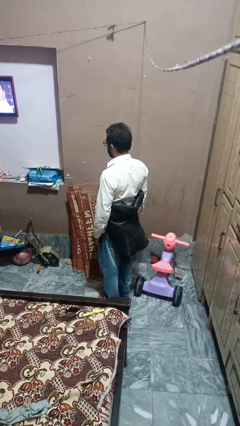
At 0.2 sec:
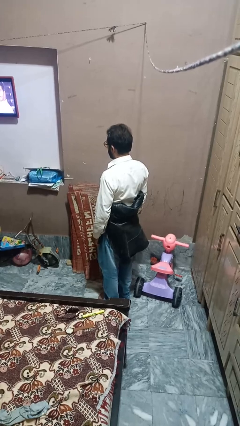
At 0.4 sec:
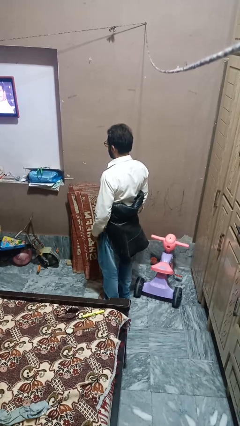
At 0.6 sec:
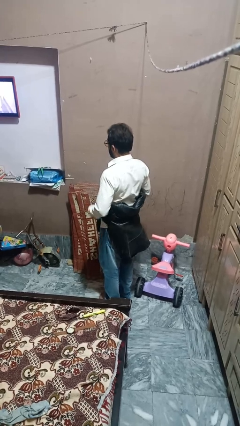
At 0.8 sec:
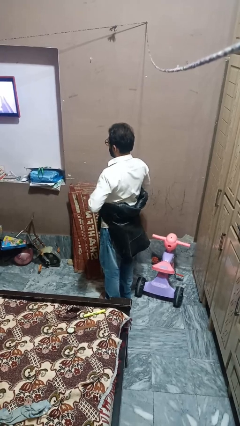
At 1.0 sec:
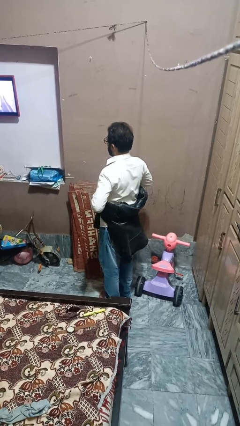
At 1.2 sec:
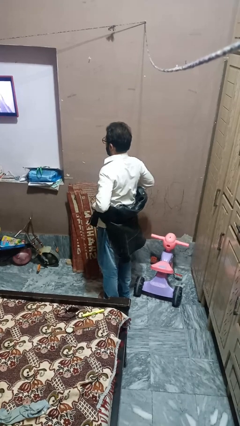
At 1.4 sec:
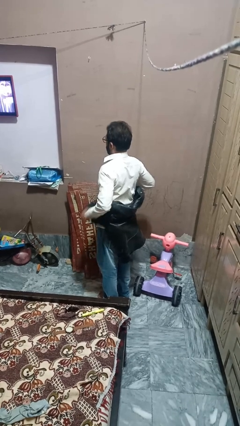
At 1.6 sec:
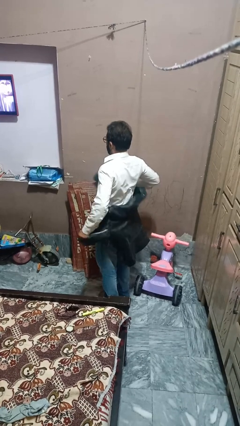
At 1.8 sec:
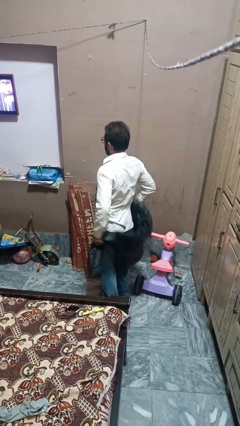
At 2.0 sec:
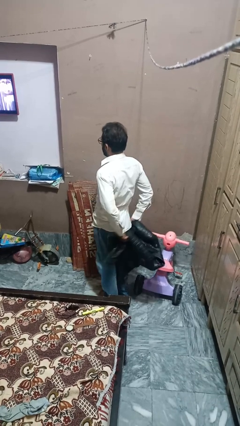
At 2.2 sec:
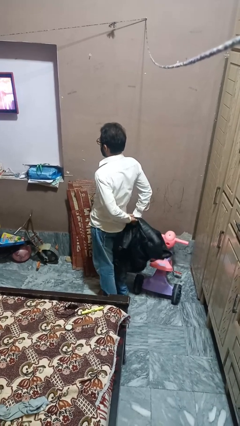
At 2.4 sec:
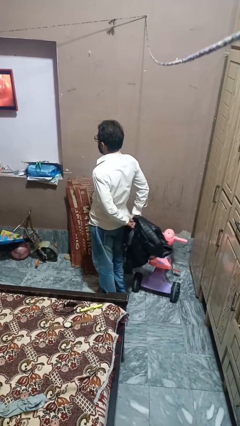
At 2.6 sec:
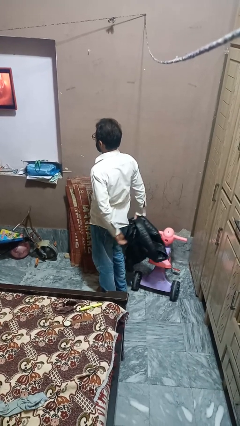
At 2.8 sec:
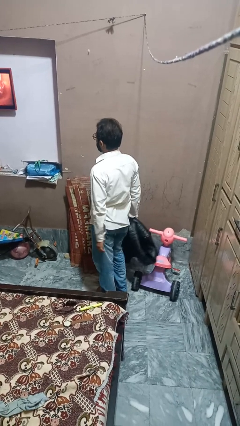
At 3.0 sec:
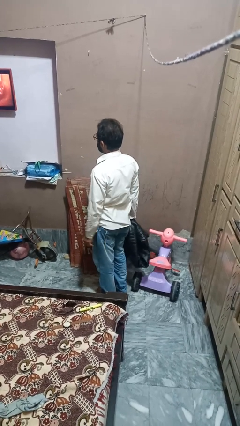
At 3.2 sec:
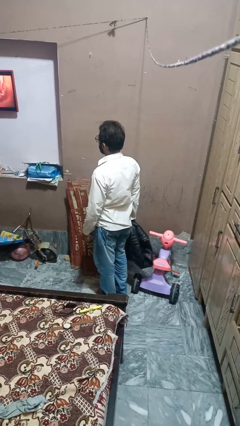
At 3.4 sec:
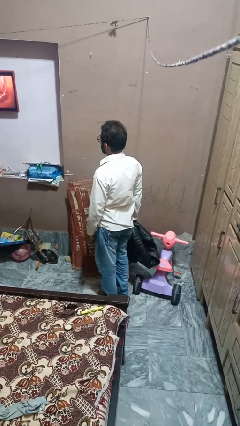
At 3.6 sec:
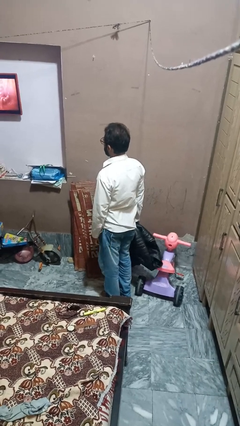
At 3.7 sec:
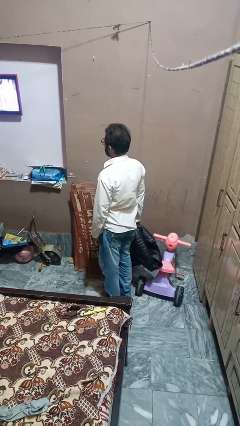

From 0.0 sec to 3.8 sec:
person unties jacket around waist

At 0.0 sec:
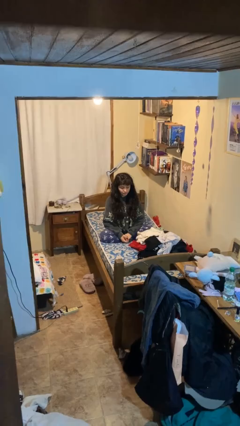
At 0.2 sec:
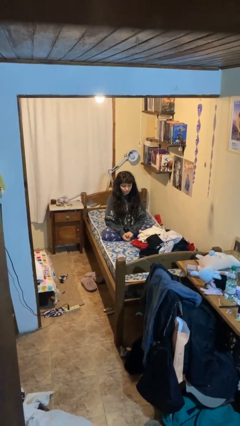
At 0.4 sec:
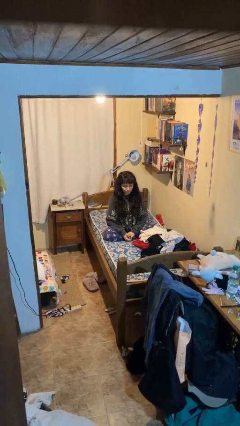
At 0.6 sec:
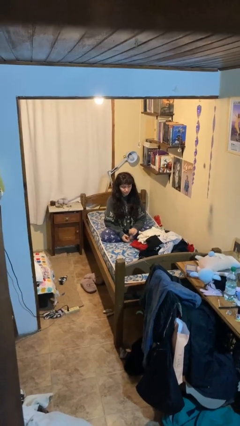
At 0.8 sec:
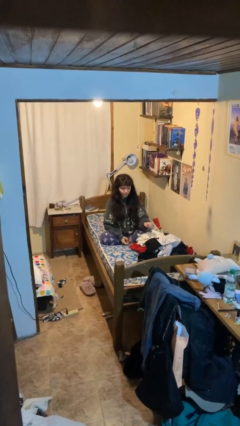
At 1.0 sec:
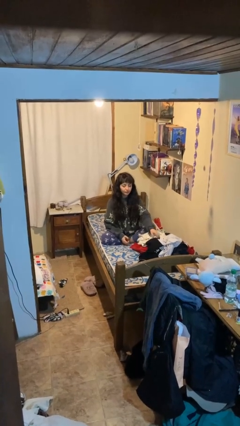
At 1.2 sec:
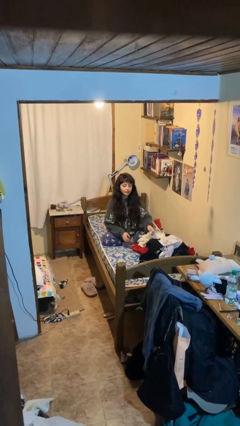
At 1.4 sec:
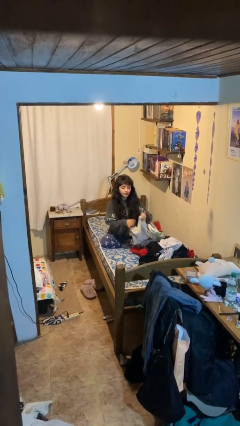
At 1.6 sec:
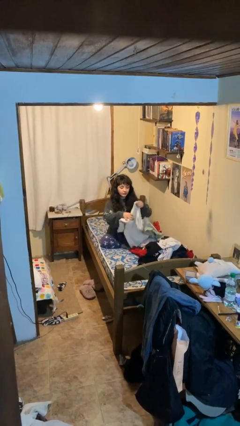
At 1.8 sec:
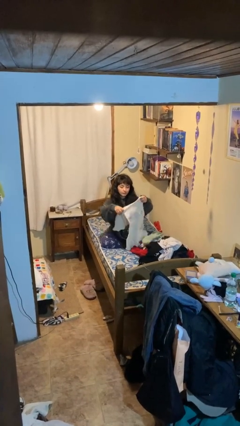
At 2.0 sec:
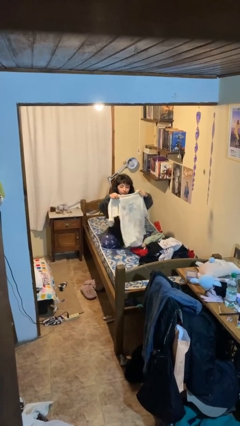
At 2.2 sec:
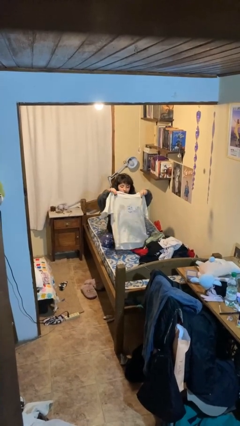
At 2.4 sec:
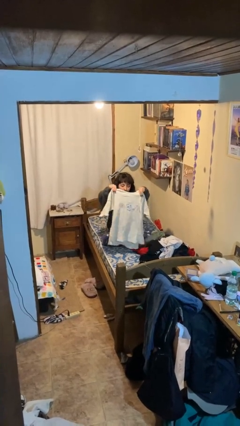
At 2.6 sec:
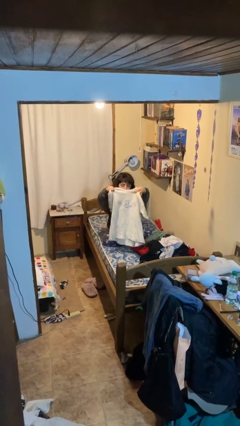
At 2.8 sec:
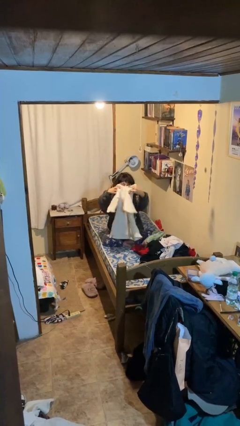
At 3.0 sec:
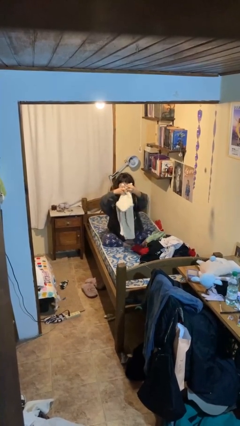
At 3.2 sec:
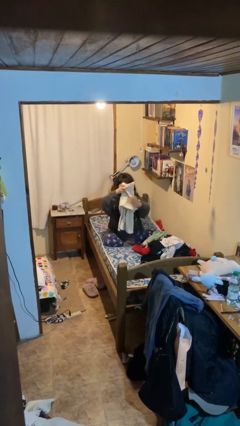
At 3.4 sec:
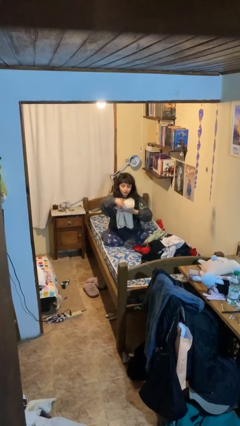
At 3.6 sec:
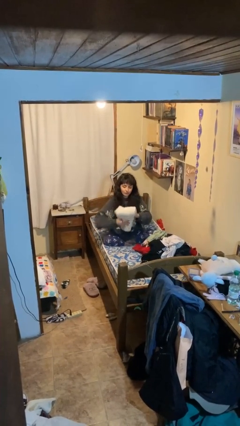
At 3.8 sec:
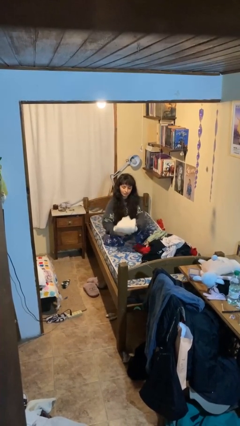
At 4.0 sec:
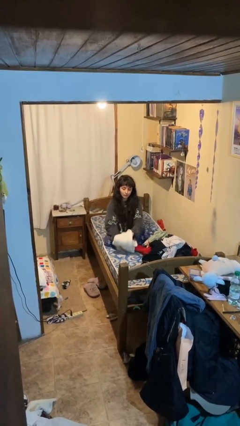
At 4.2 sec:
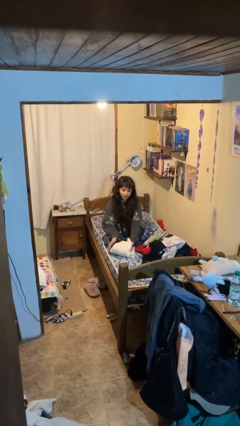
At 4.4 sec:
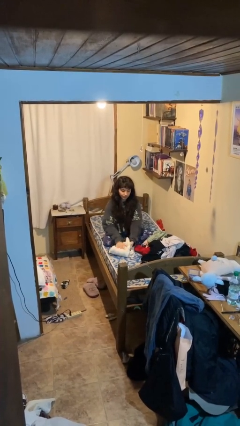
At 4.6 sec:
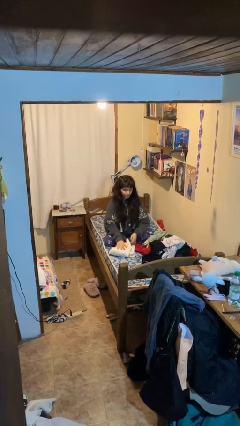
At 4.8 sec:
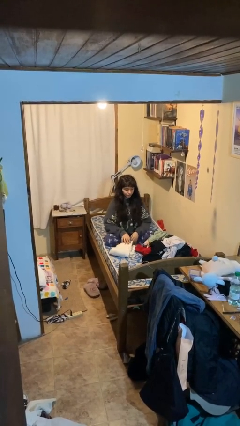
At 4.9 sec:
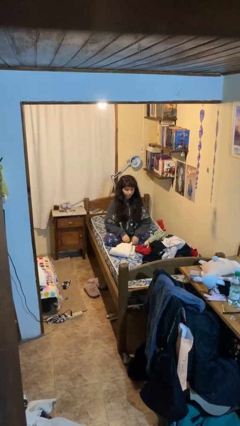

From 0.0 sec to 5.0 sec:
person folds shirt

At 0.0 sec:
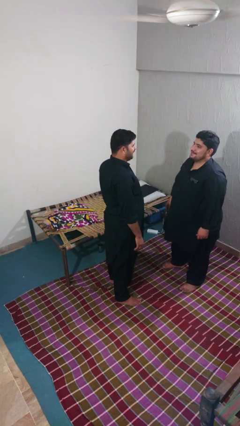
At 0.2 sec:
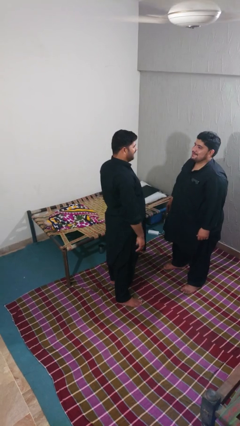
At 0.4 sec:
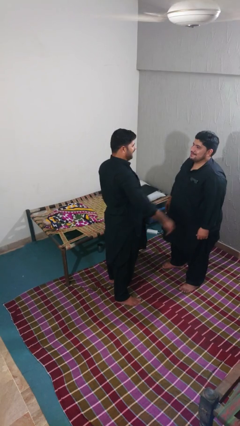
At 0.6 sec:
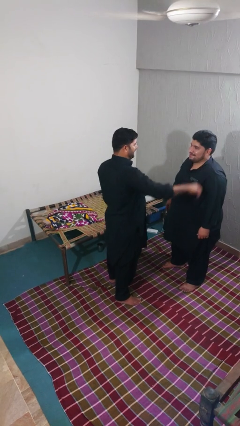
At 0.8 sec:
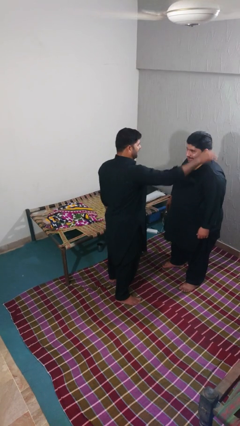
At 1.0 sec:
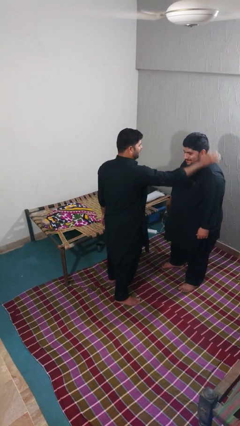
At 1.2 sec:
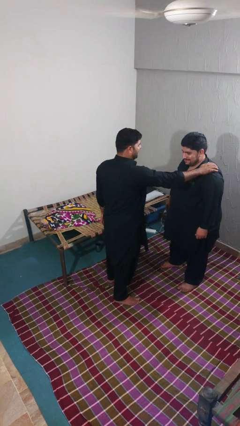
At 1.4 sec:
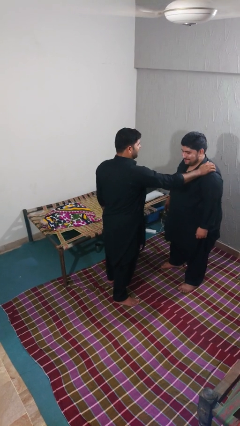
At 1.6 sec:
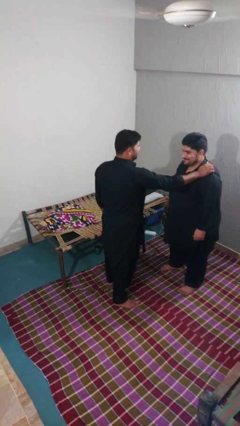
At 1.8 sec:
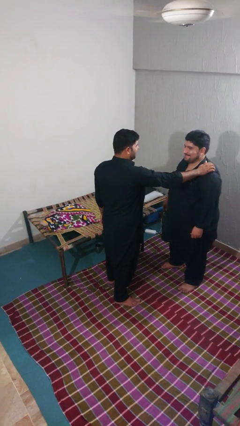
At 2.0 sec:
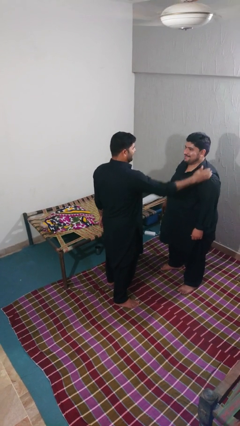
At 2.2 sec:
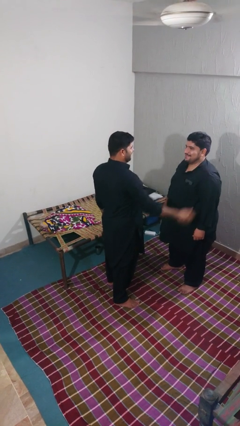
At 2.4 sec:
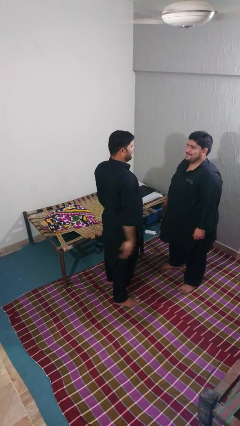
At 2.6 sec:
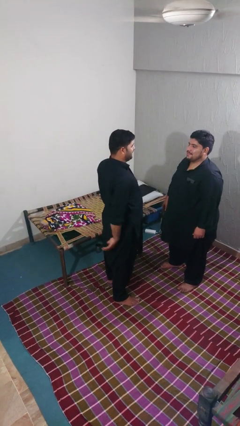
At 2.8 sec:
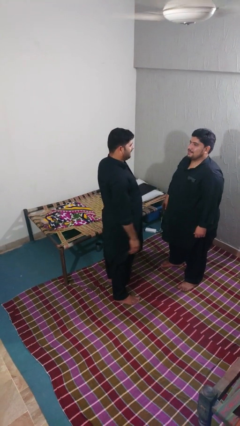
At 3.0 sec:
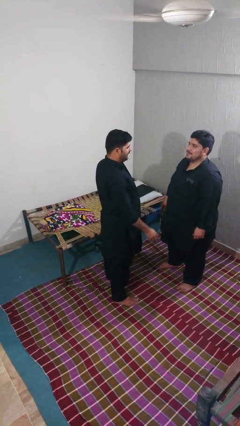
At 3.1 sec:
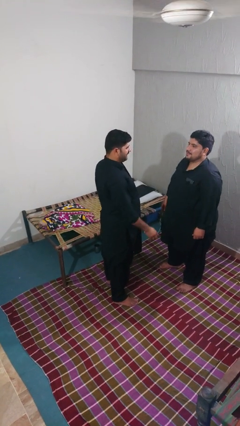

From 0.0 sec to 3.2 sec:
person pounds shoulders of person

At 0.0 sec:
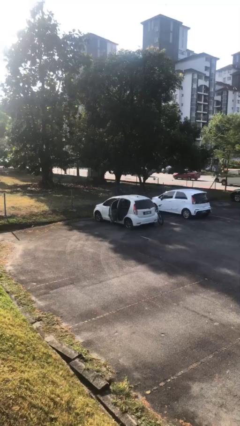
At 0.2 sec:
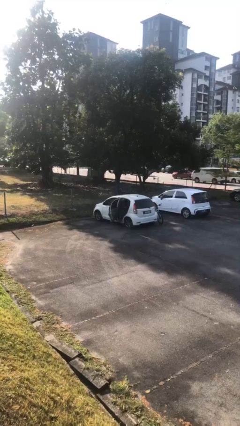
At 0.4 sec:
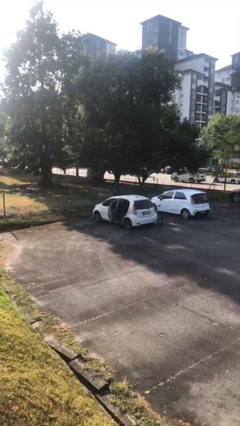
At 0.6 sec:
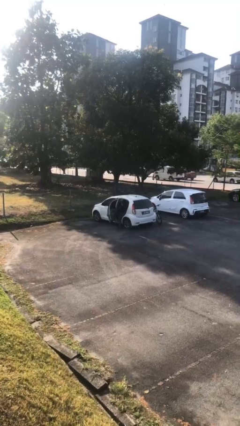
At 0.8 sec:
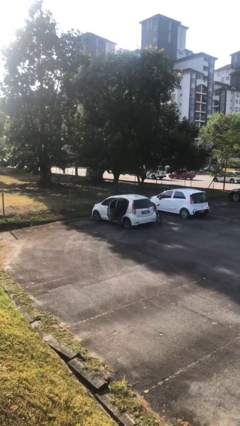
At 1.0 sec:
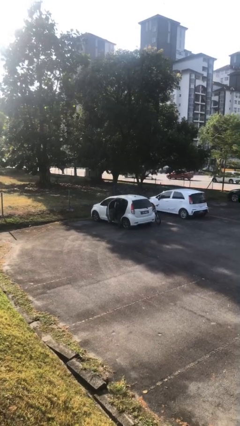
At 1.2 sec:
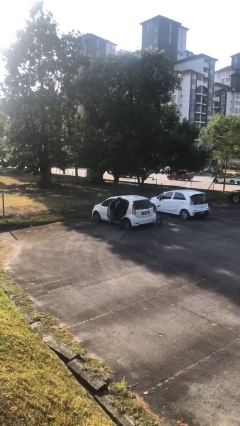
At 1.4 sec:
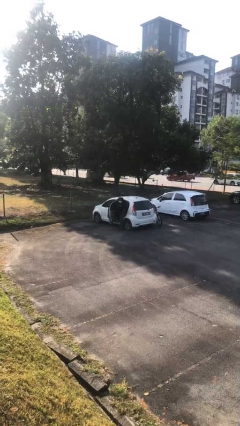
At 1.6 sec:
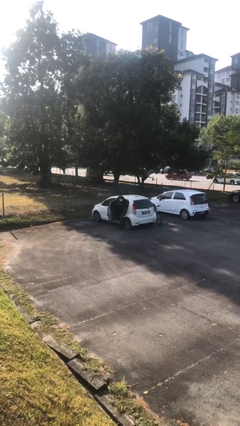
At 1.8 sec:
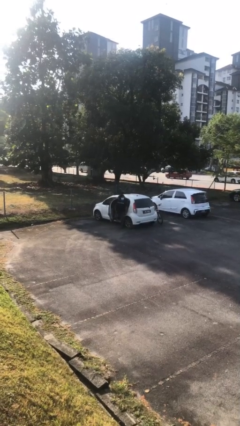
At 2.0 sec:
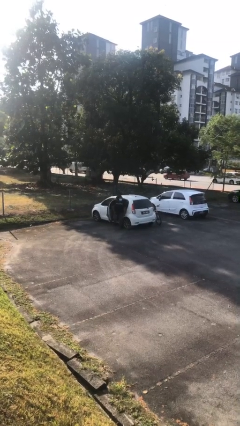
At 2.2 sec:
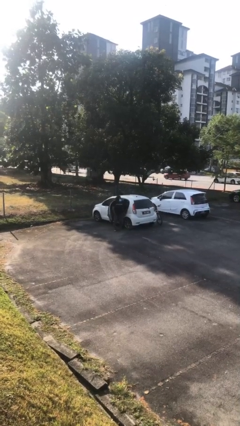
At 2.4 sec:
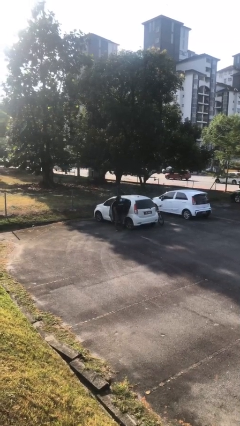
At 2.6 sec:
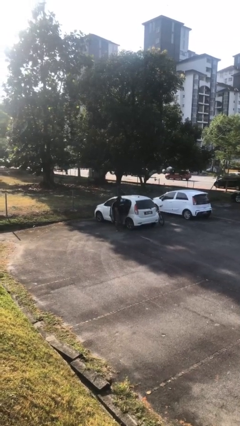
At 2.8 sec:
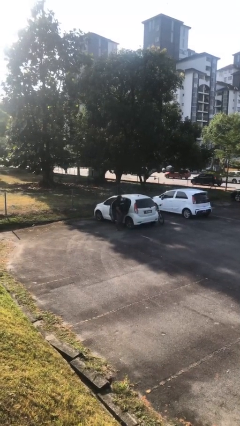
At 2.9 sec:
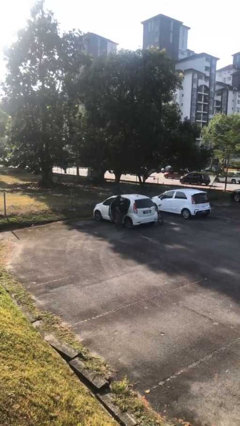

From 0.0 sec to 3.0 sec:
person exits car

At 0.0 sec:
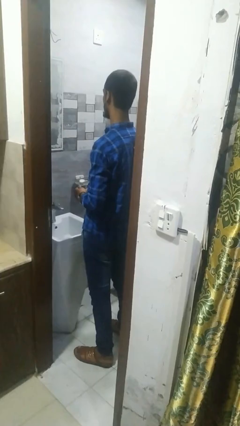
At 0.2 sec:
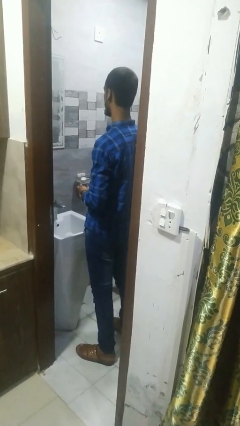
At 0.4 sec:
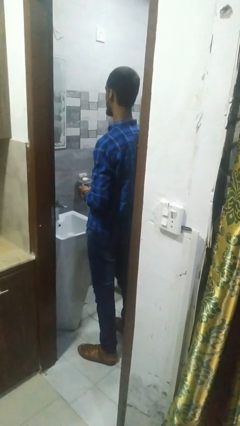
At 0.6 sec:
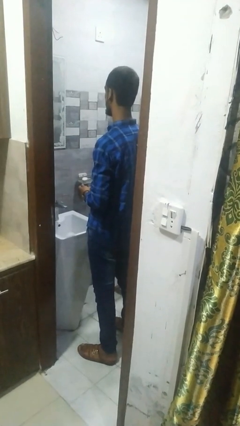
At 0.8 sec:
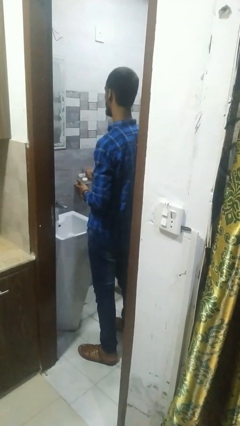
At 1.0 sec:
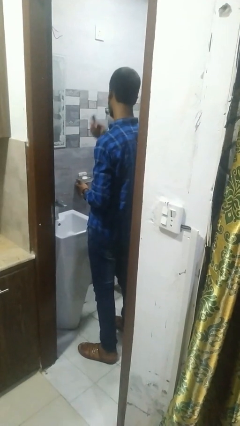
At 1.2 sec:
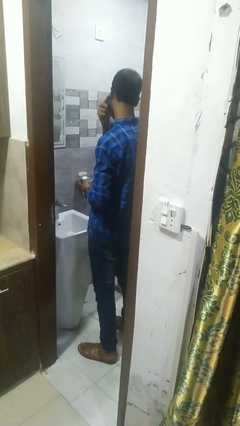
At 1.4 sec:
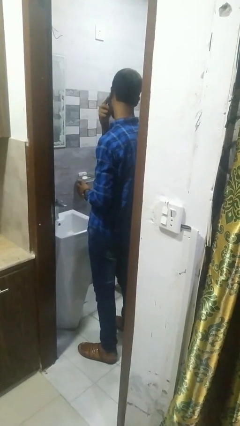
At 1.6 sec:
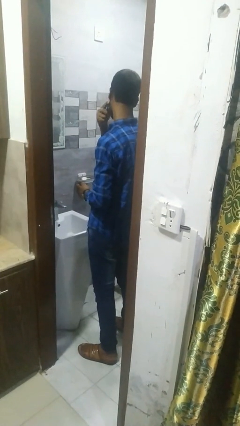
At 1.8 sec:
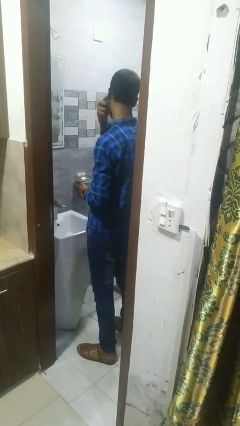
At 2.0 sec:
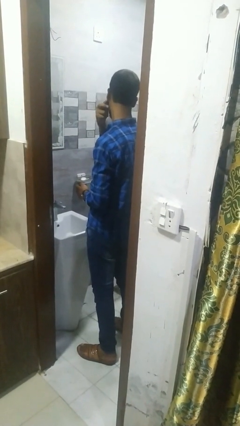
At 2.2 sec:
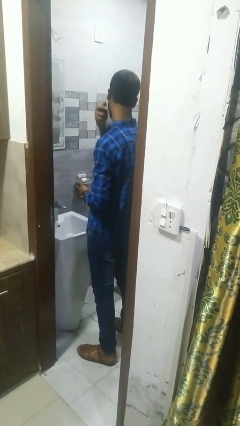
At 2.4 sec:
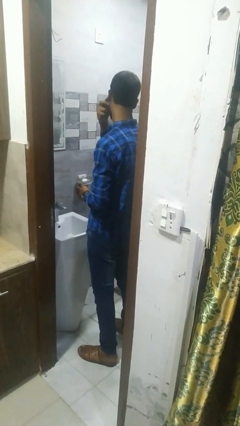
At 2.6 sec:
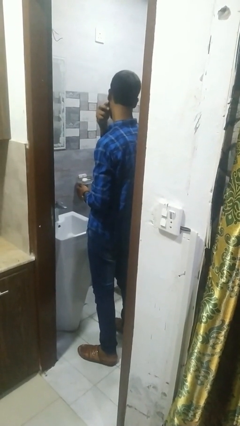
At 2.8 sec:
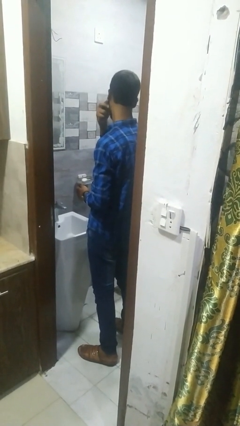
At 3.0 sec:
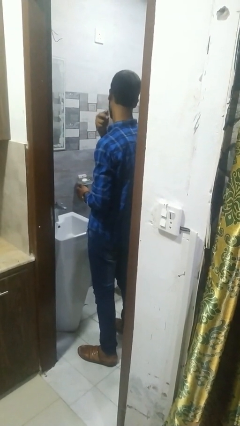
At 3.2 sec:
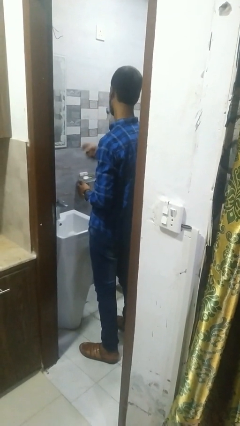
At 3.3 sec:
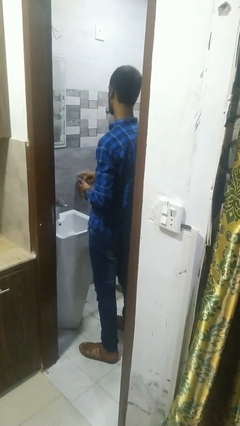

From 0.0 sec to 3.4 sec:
person shaves face
